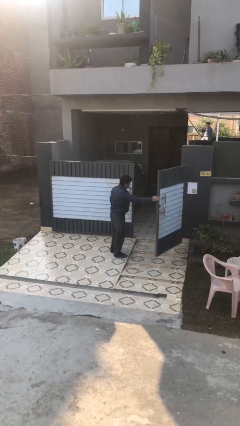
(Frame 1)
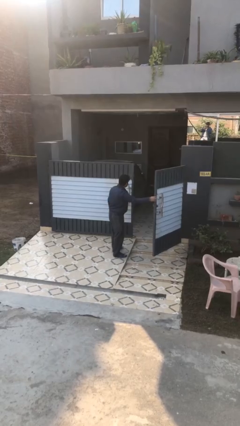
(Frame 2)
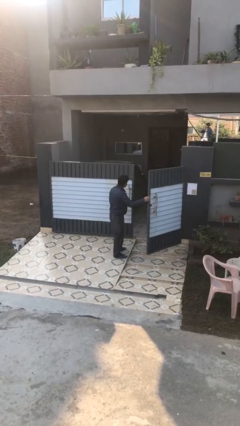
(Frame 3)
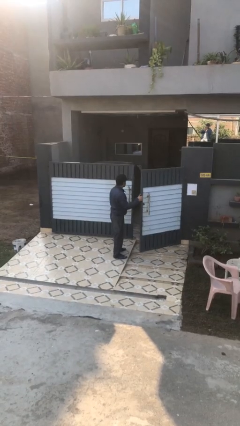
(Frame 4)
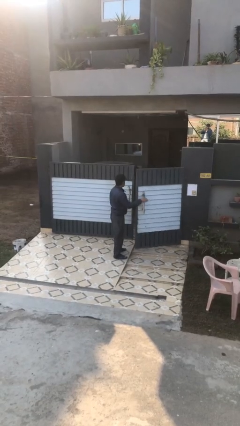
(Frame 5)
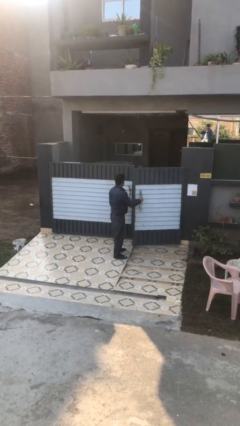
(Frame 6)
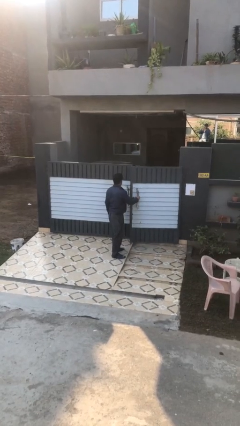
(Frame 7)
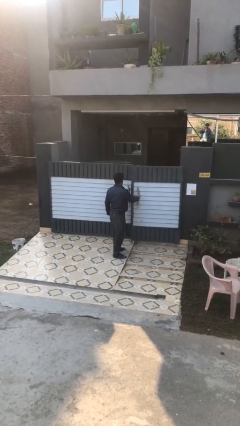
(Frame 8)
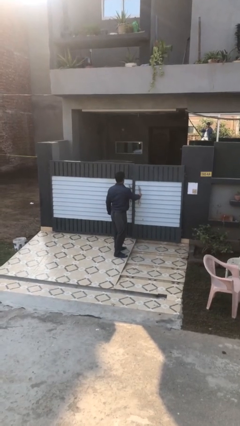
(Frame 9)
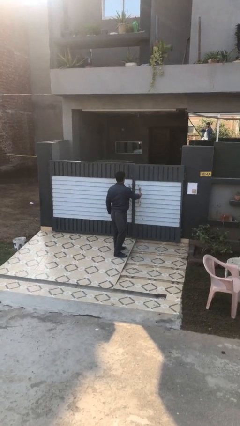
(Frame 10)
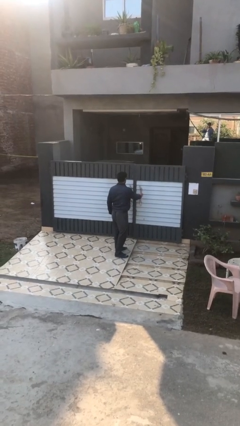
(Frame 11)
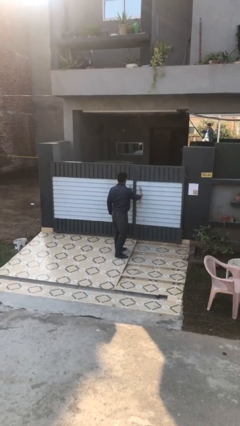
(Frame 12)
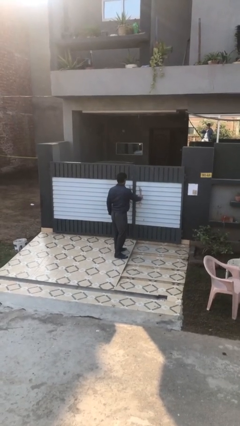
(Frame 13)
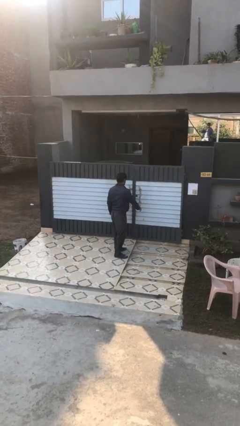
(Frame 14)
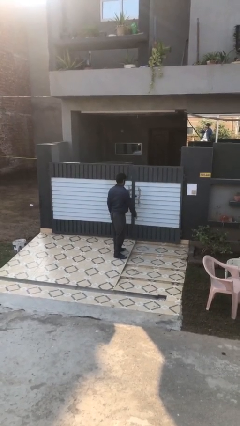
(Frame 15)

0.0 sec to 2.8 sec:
person closes facility door

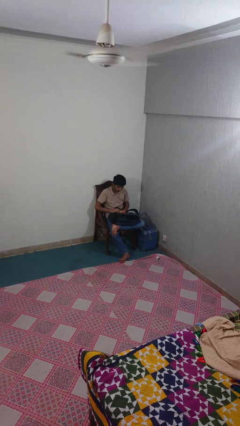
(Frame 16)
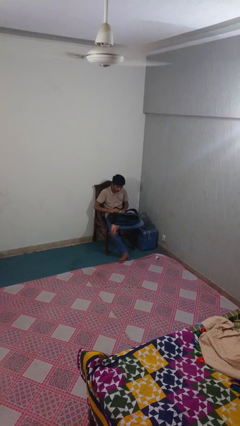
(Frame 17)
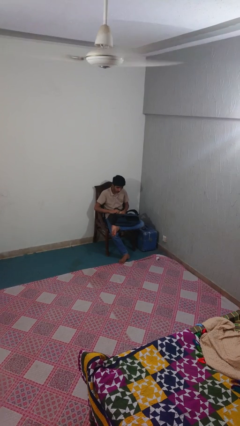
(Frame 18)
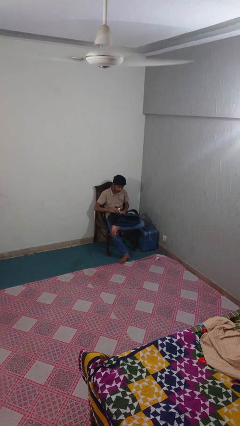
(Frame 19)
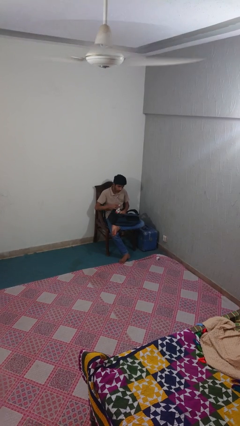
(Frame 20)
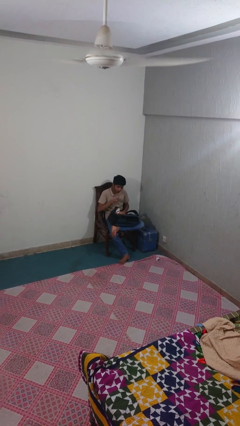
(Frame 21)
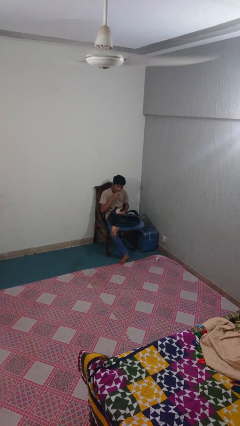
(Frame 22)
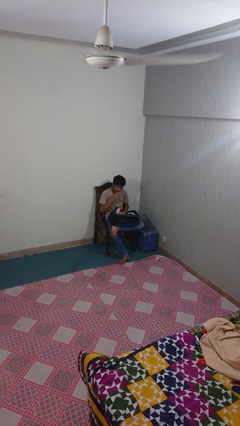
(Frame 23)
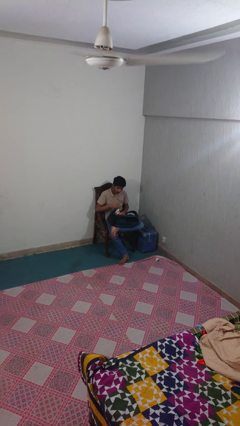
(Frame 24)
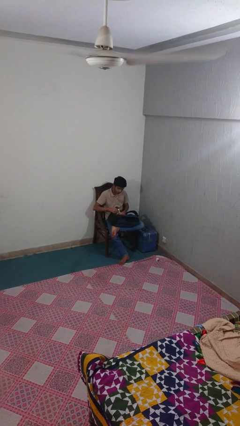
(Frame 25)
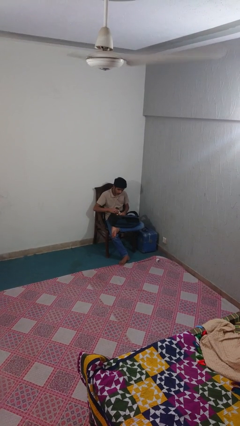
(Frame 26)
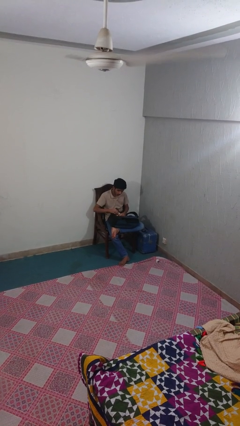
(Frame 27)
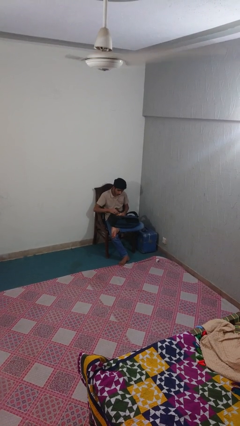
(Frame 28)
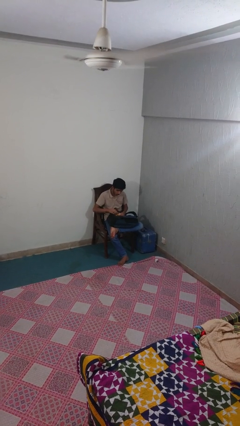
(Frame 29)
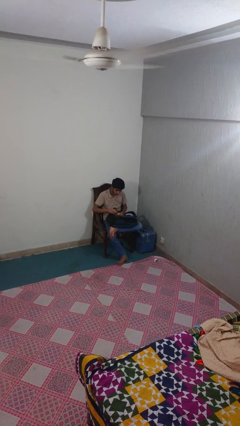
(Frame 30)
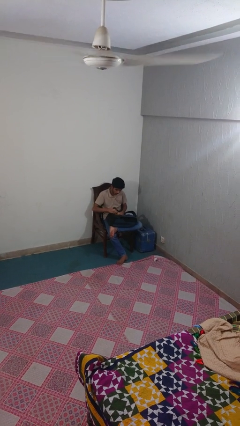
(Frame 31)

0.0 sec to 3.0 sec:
person eats snack from bag

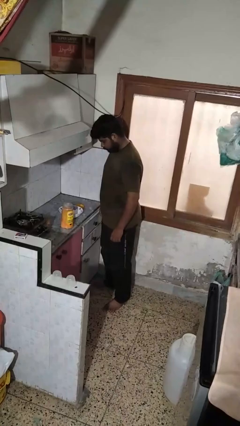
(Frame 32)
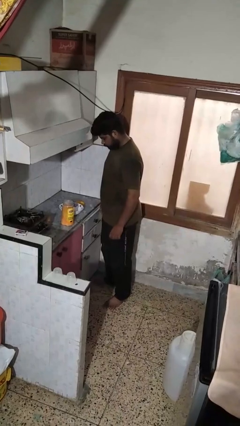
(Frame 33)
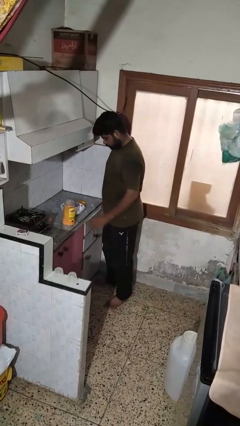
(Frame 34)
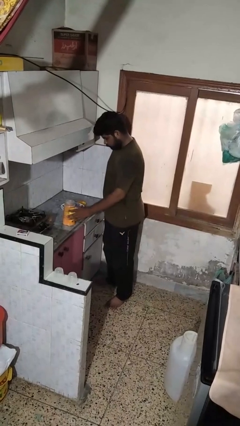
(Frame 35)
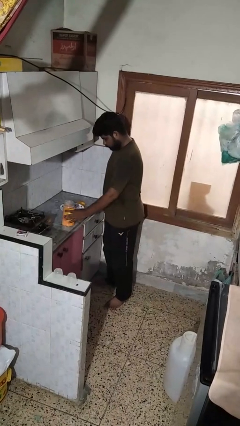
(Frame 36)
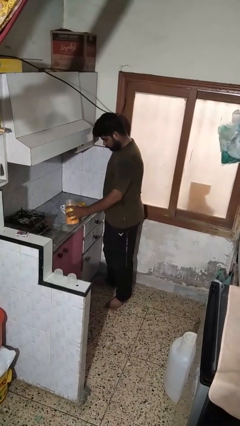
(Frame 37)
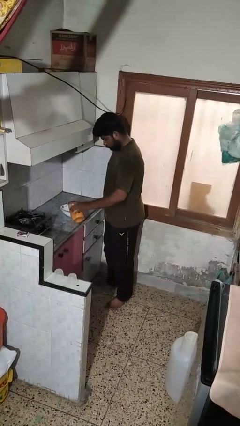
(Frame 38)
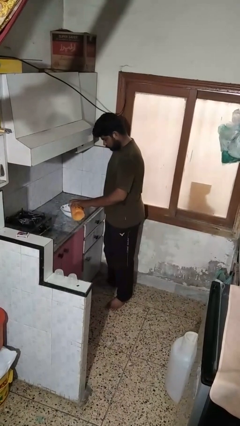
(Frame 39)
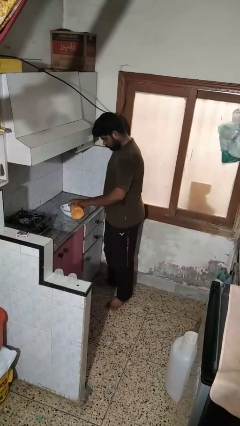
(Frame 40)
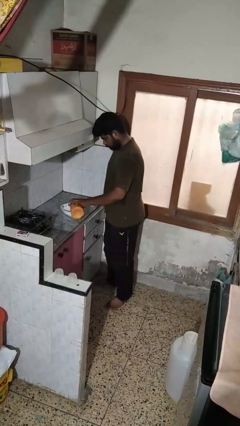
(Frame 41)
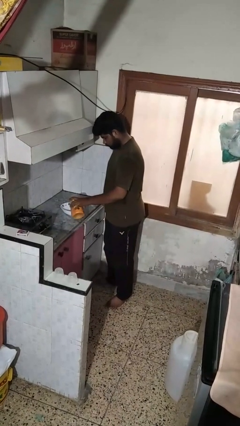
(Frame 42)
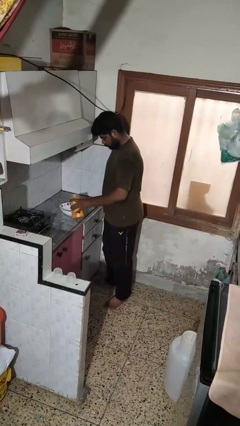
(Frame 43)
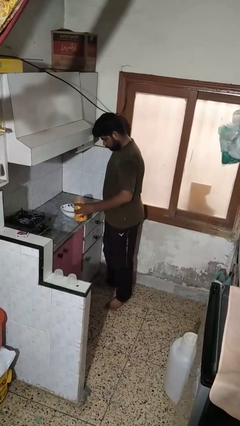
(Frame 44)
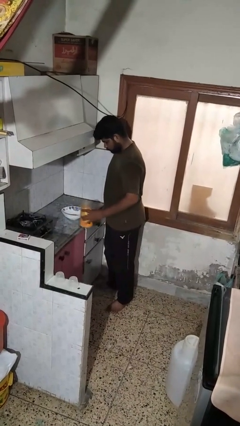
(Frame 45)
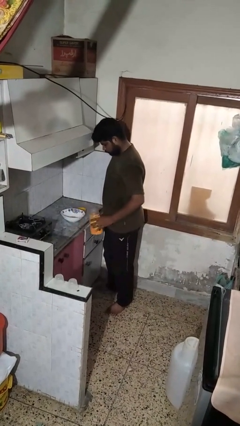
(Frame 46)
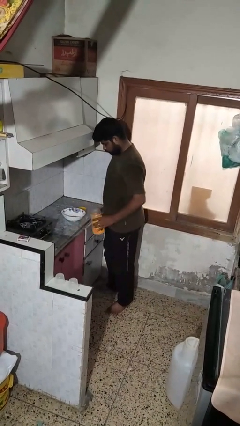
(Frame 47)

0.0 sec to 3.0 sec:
person pours into bowl

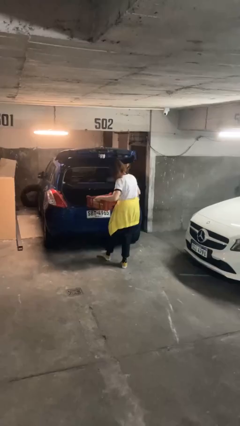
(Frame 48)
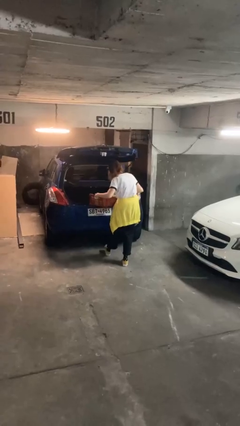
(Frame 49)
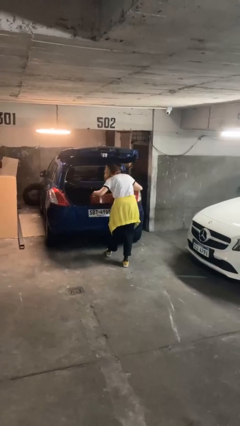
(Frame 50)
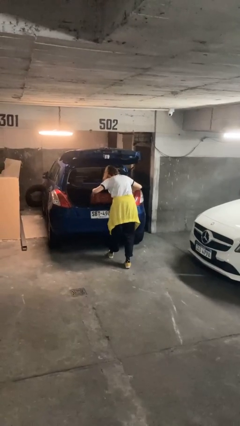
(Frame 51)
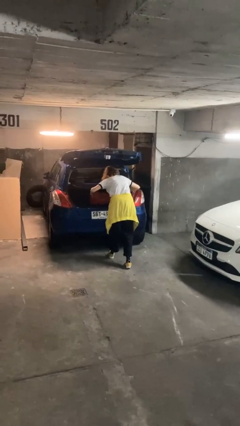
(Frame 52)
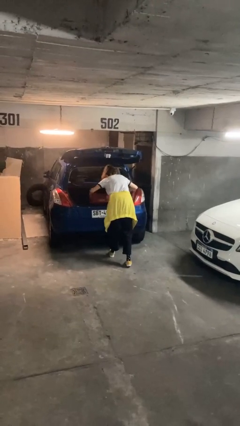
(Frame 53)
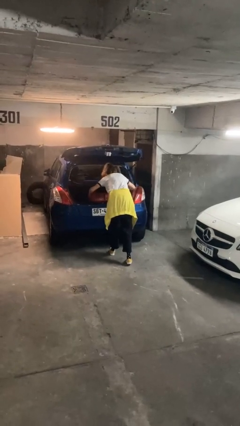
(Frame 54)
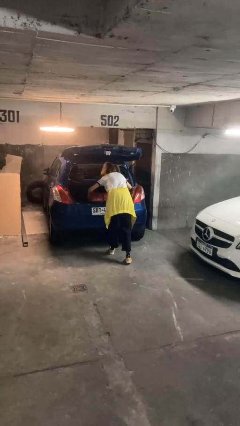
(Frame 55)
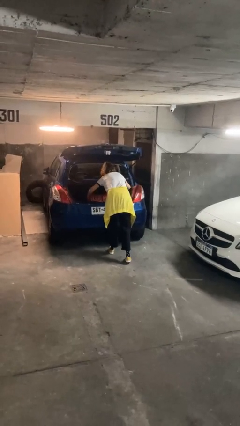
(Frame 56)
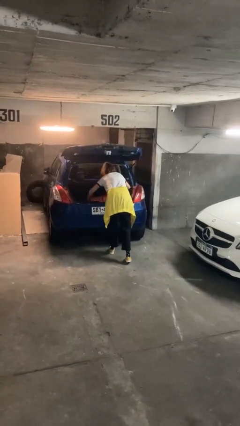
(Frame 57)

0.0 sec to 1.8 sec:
person loads car

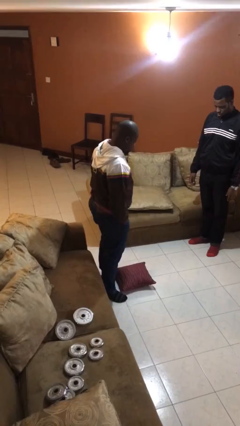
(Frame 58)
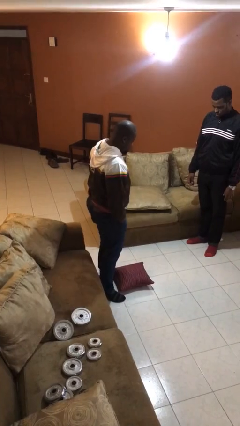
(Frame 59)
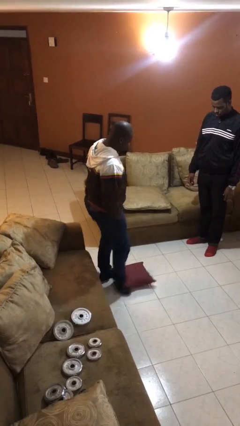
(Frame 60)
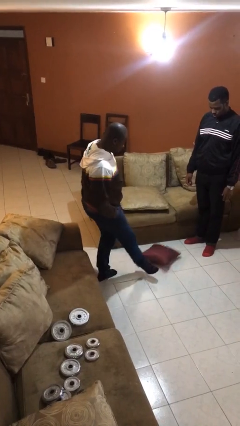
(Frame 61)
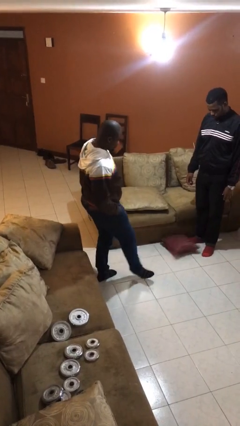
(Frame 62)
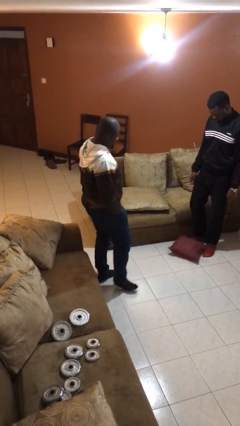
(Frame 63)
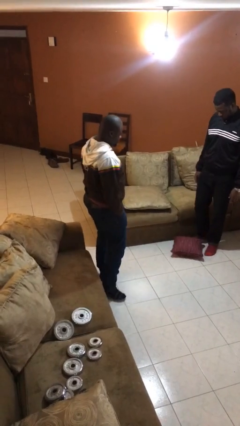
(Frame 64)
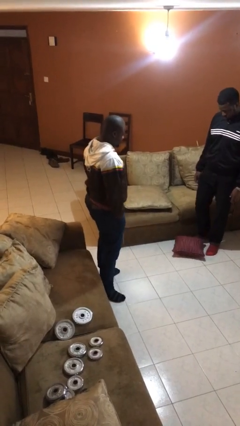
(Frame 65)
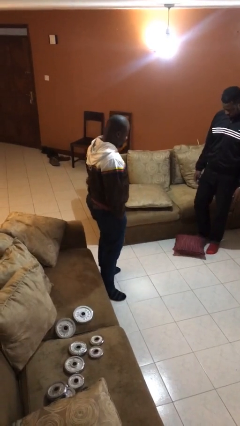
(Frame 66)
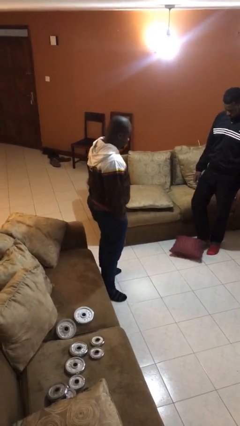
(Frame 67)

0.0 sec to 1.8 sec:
person kicks object to person

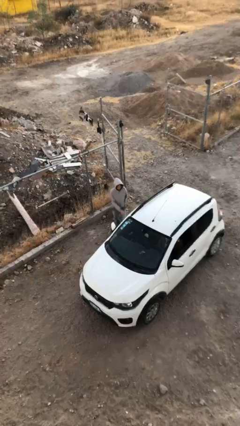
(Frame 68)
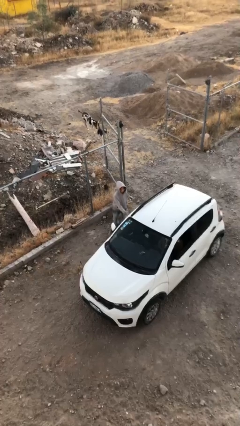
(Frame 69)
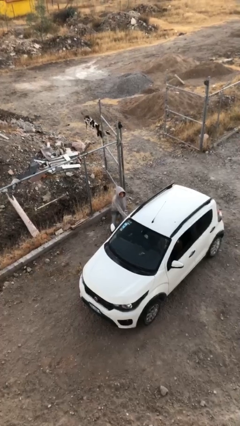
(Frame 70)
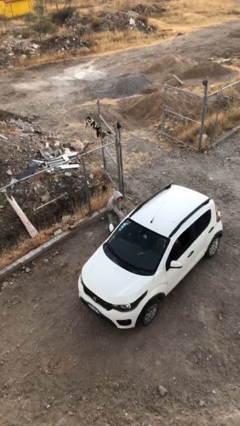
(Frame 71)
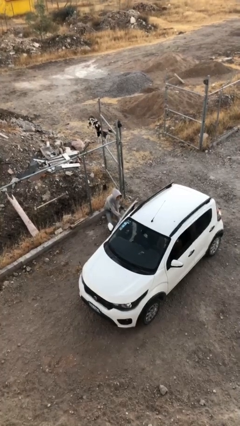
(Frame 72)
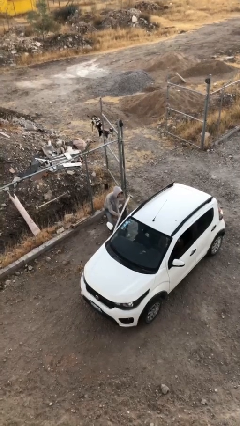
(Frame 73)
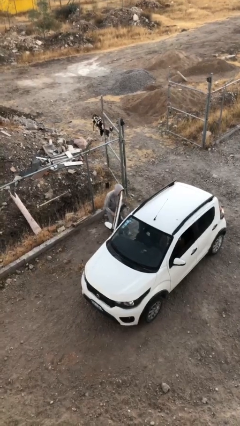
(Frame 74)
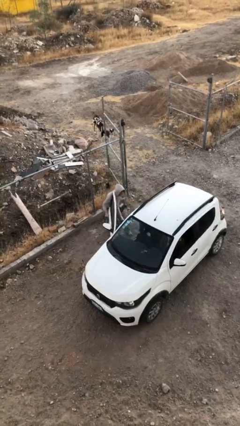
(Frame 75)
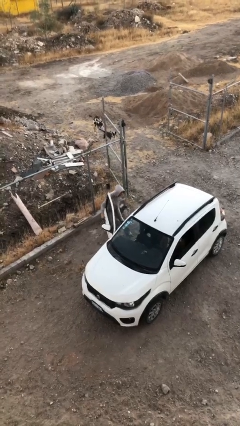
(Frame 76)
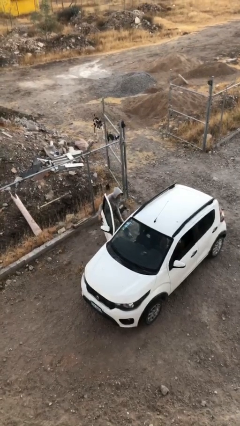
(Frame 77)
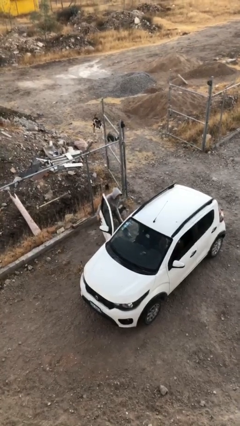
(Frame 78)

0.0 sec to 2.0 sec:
person opens car door

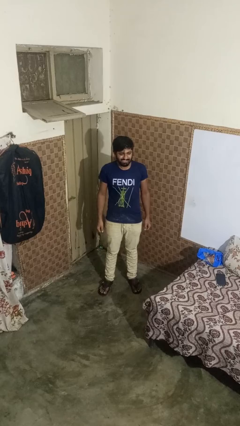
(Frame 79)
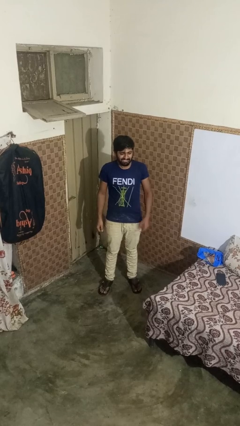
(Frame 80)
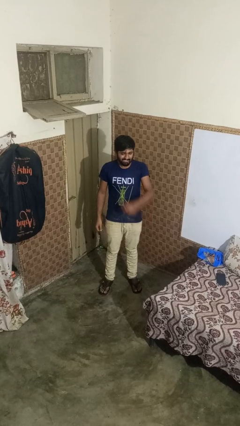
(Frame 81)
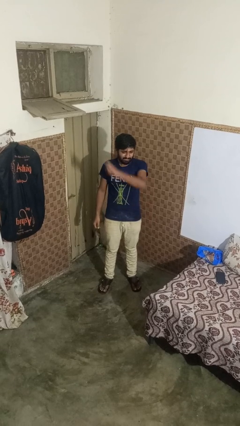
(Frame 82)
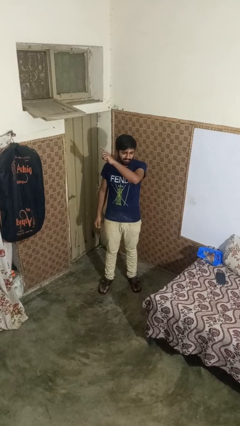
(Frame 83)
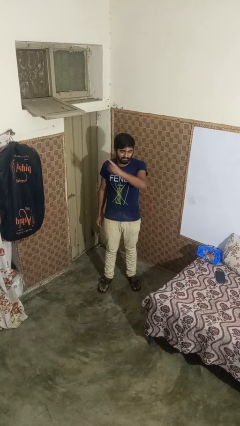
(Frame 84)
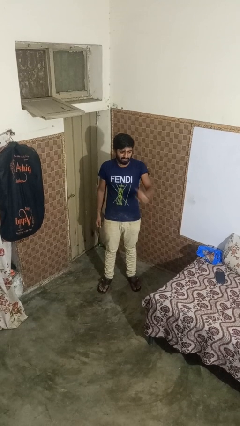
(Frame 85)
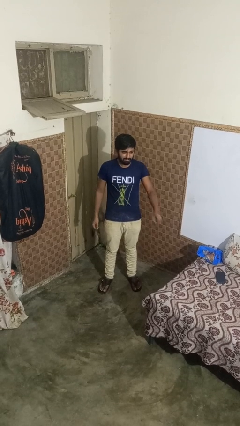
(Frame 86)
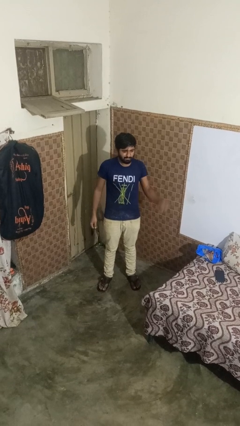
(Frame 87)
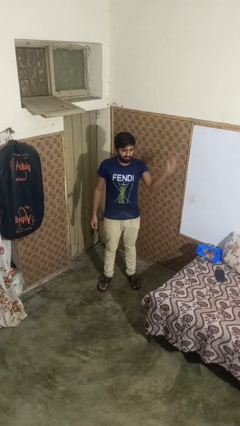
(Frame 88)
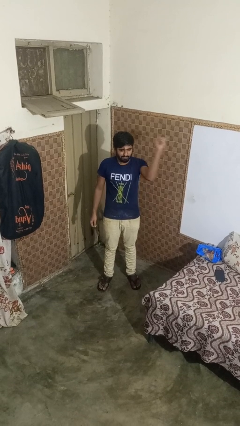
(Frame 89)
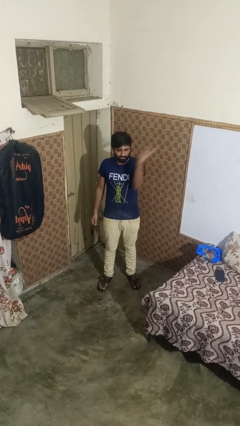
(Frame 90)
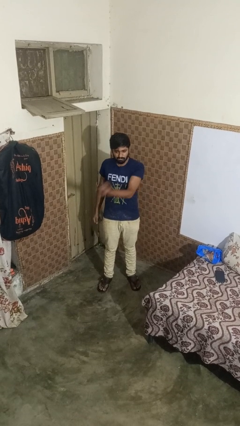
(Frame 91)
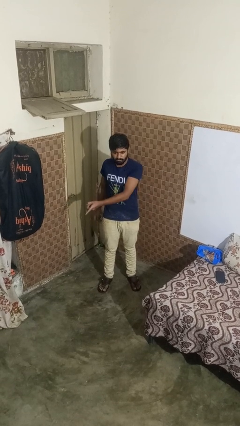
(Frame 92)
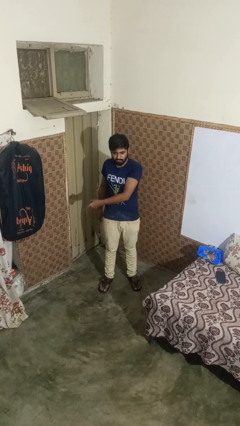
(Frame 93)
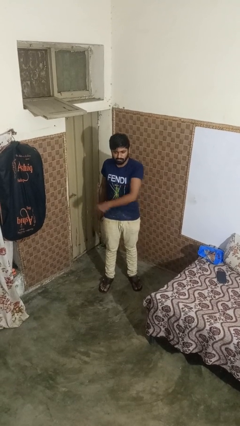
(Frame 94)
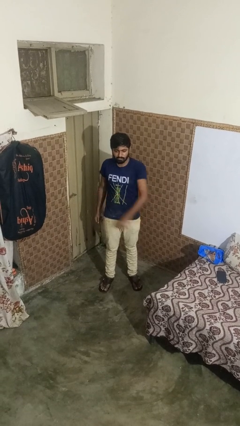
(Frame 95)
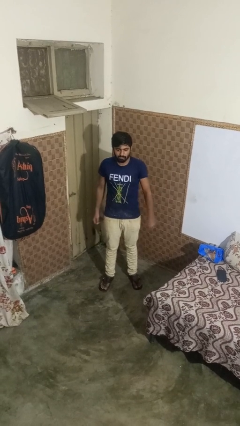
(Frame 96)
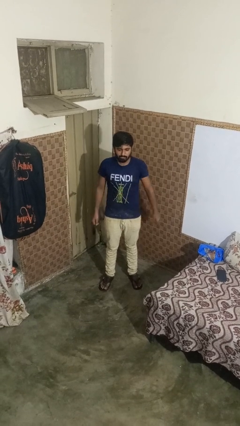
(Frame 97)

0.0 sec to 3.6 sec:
person gestures cut
